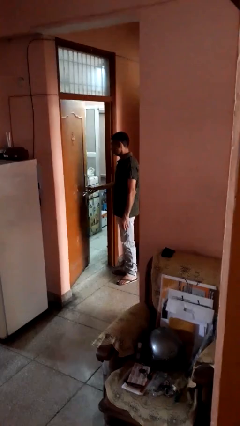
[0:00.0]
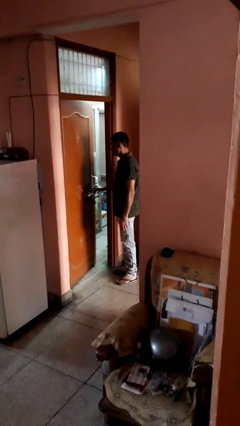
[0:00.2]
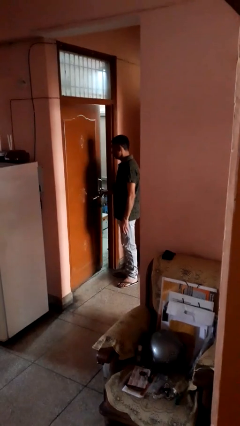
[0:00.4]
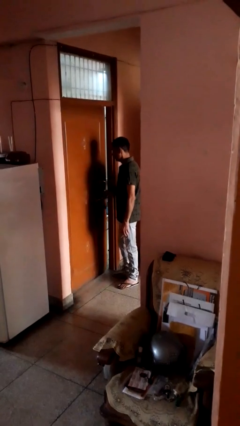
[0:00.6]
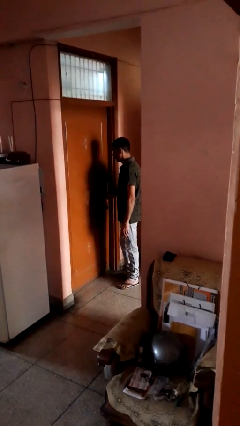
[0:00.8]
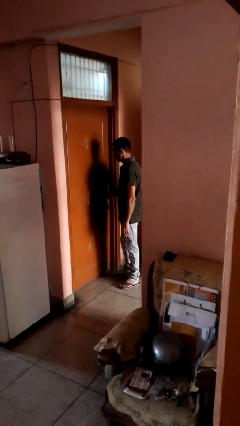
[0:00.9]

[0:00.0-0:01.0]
person closes facility door

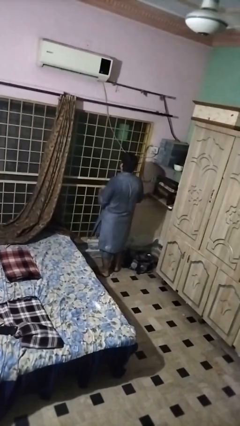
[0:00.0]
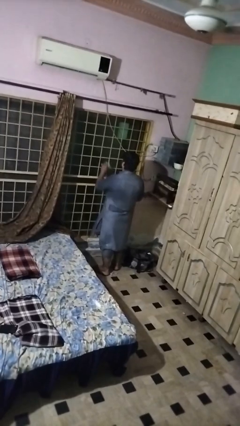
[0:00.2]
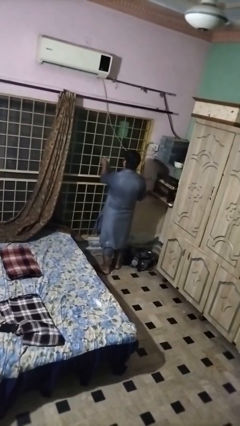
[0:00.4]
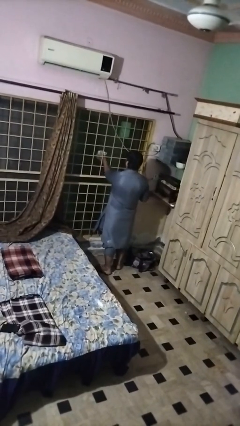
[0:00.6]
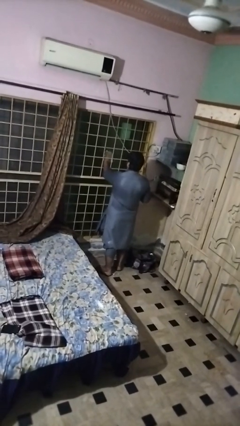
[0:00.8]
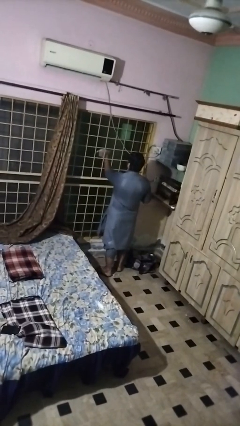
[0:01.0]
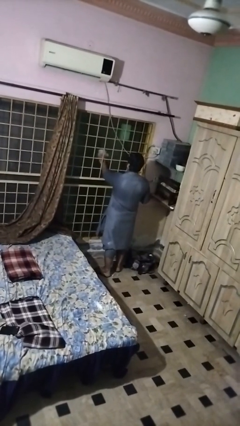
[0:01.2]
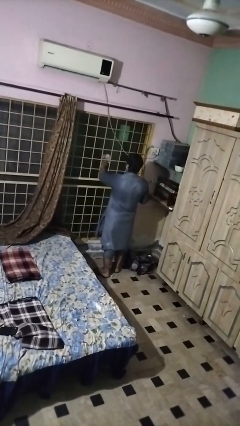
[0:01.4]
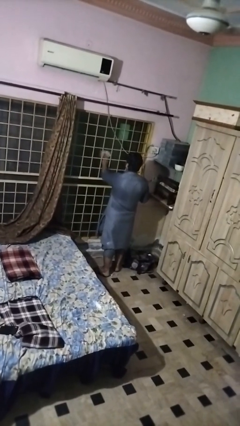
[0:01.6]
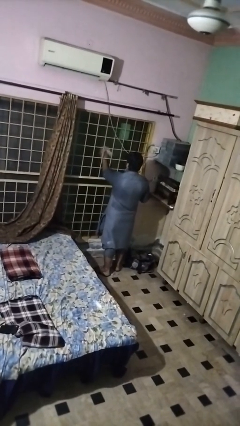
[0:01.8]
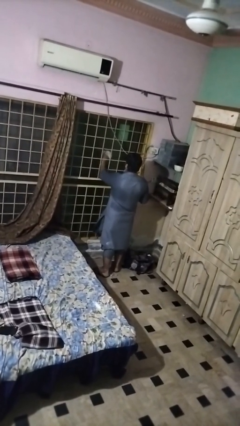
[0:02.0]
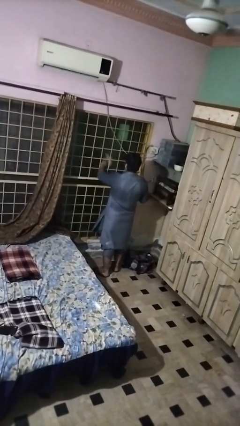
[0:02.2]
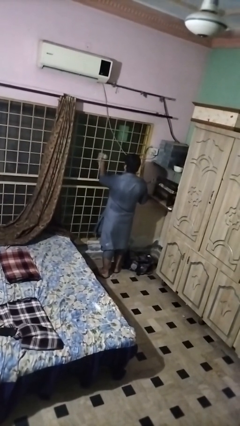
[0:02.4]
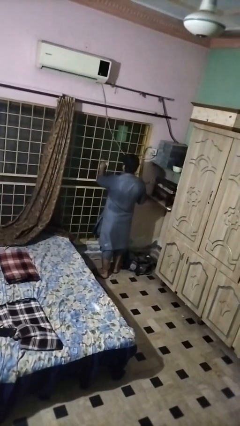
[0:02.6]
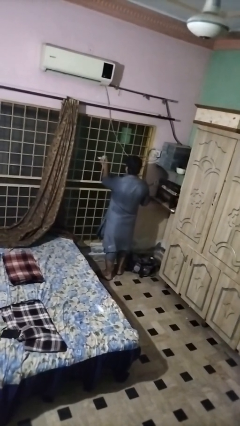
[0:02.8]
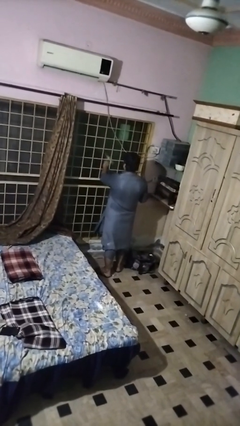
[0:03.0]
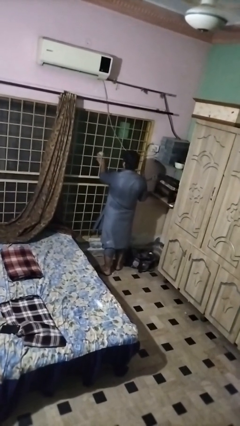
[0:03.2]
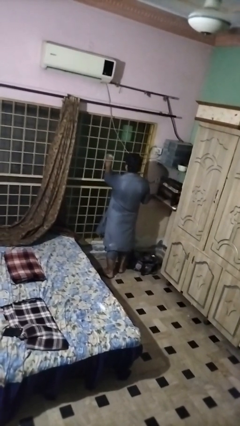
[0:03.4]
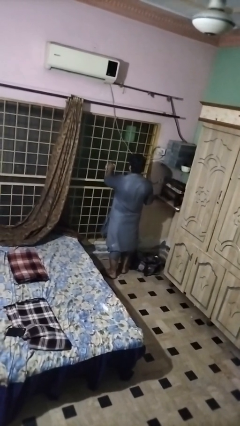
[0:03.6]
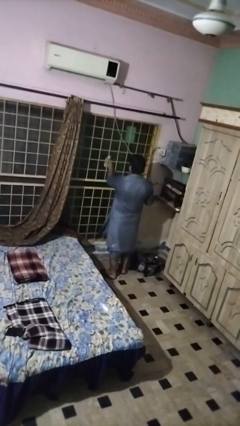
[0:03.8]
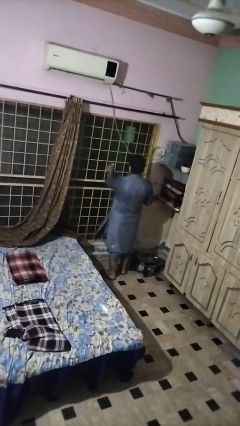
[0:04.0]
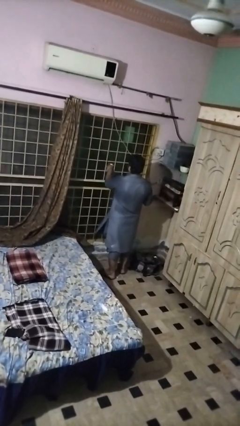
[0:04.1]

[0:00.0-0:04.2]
person washes window

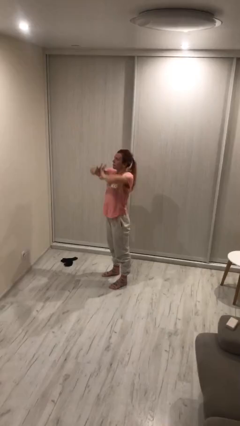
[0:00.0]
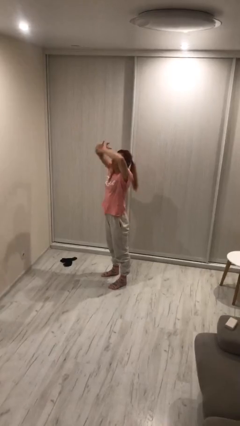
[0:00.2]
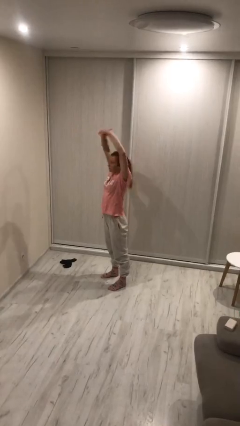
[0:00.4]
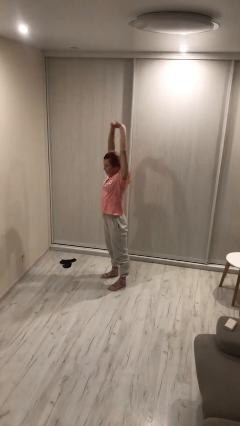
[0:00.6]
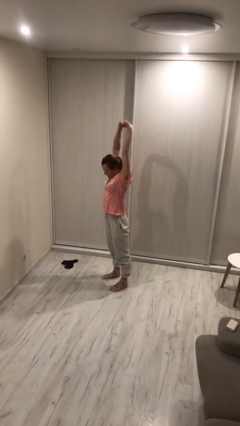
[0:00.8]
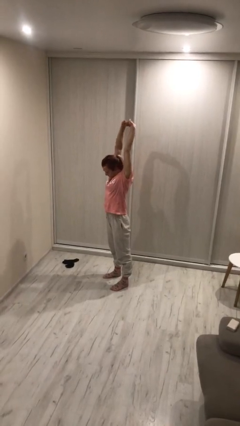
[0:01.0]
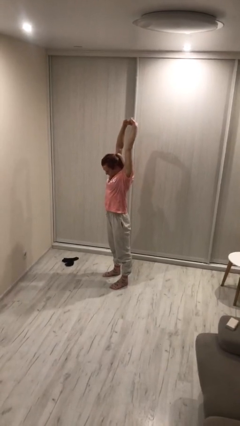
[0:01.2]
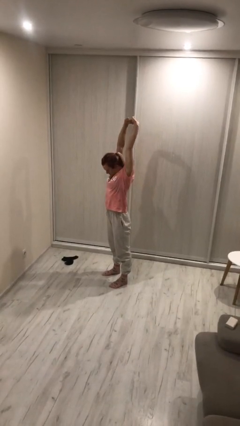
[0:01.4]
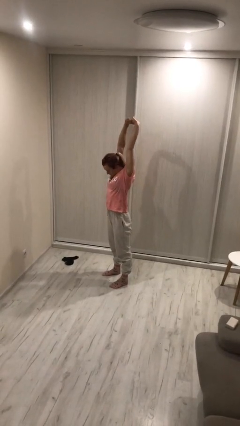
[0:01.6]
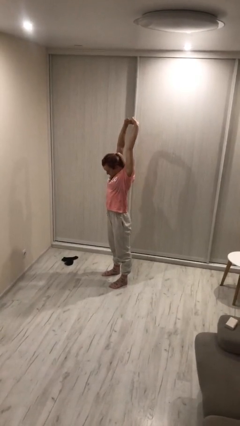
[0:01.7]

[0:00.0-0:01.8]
person stretches arms over head

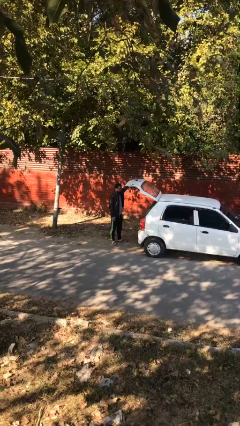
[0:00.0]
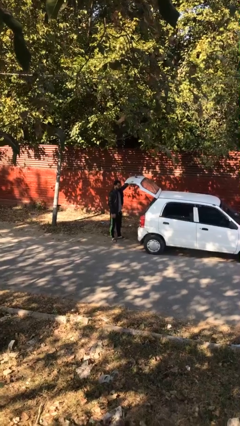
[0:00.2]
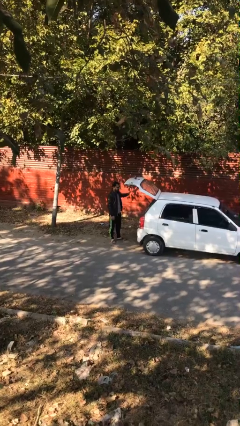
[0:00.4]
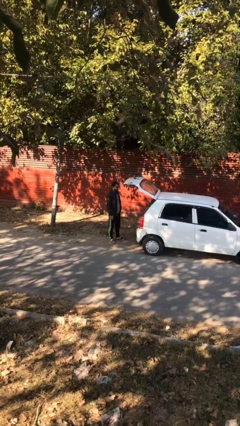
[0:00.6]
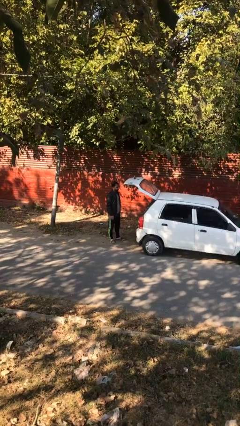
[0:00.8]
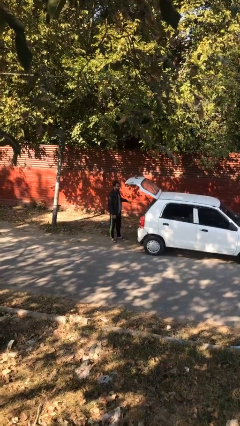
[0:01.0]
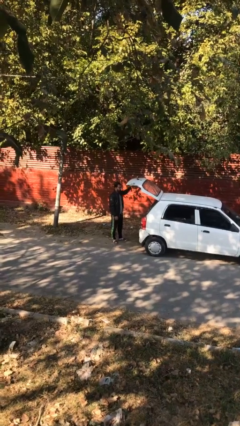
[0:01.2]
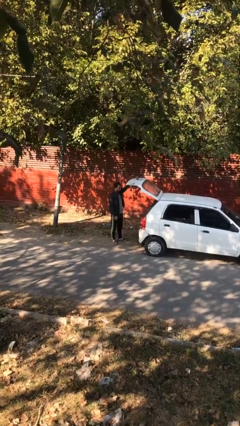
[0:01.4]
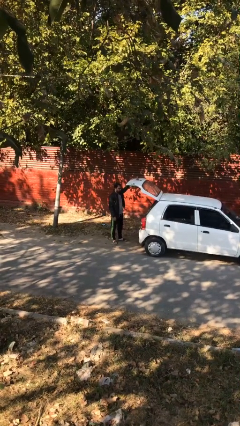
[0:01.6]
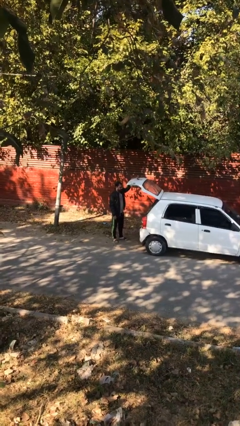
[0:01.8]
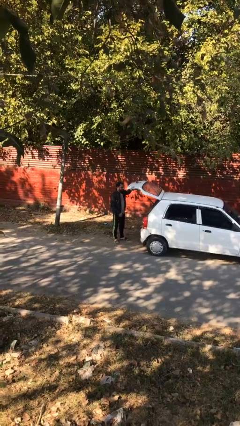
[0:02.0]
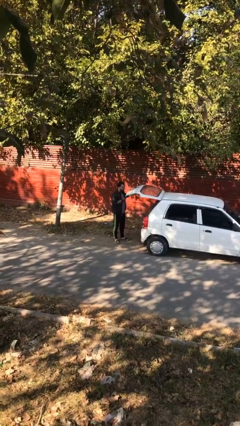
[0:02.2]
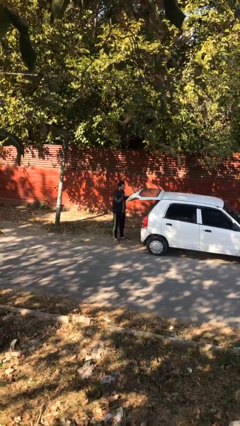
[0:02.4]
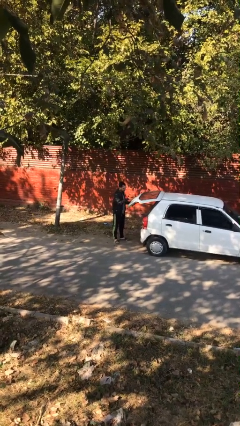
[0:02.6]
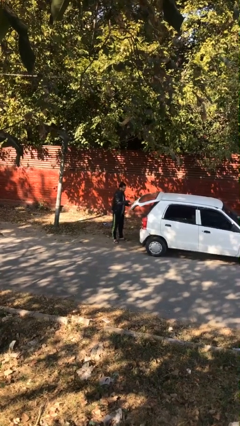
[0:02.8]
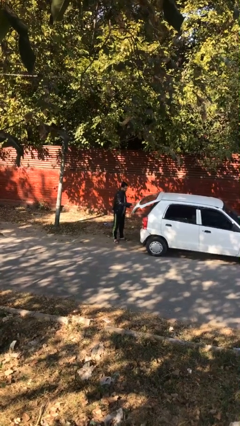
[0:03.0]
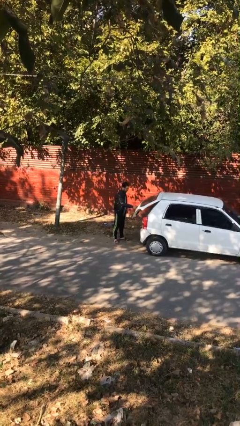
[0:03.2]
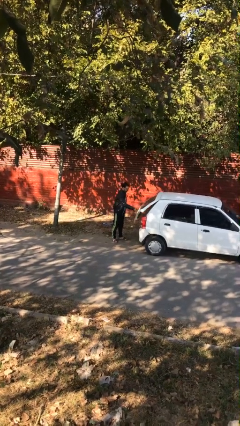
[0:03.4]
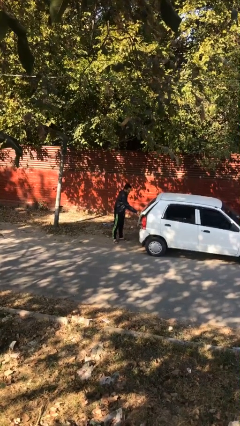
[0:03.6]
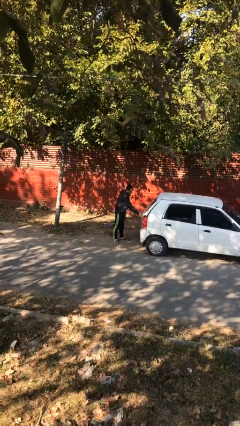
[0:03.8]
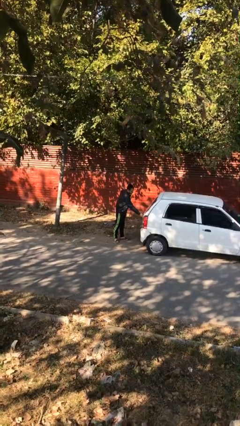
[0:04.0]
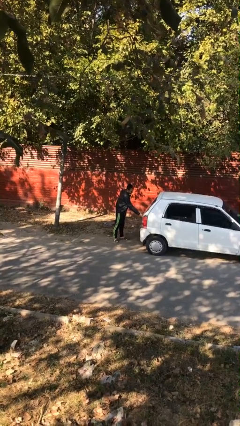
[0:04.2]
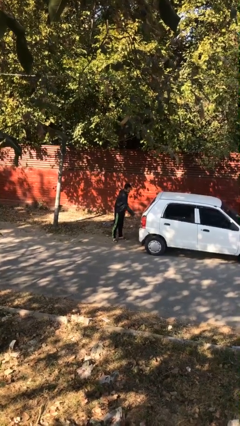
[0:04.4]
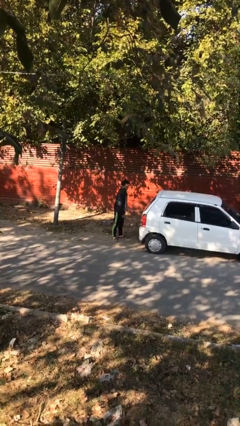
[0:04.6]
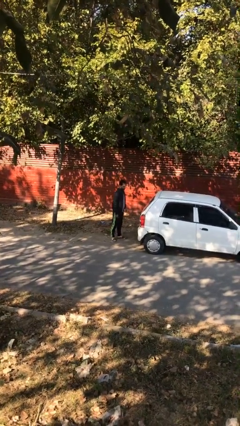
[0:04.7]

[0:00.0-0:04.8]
person closes car trunk

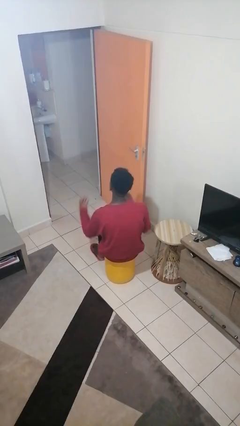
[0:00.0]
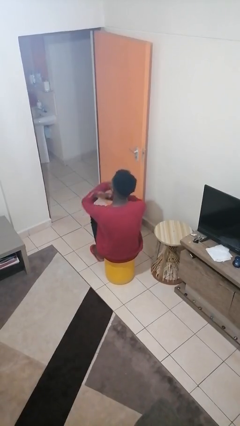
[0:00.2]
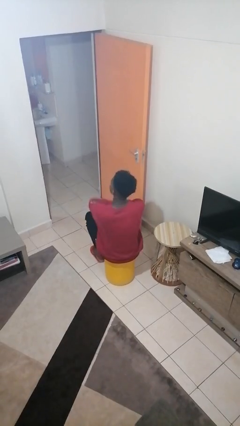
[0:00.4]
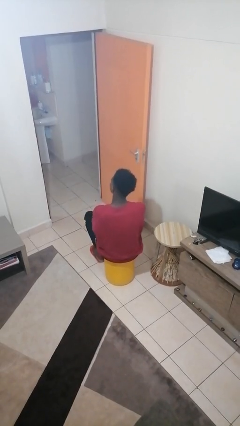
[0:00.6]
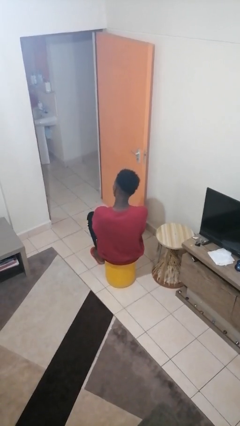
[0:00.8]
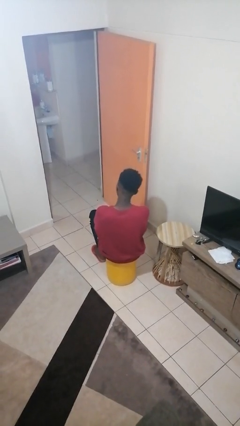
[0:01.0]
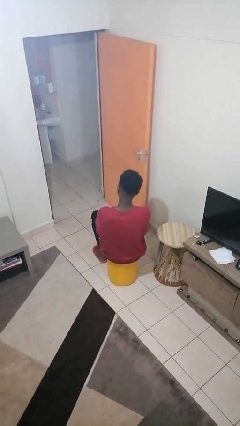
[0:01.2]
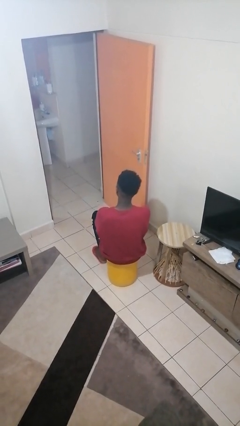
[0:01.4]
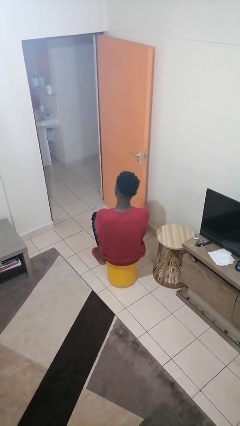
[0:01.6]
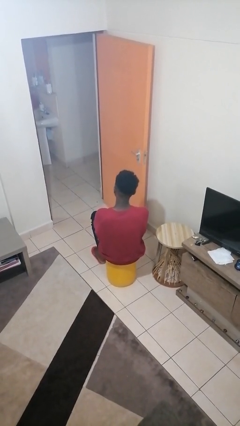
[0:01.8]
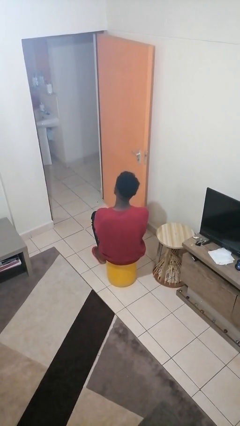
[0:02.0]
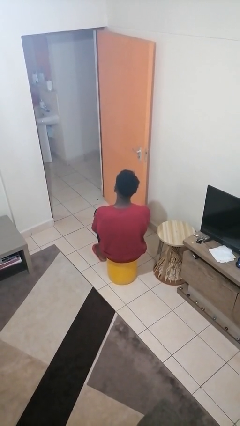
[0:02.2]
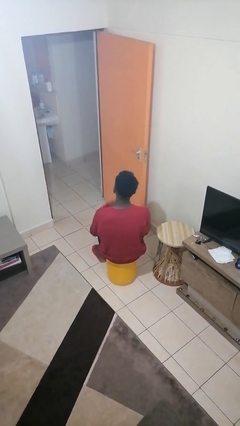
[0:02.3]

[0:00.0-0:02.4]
person crosses arms

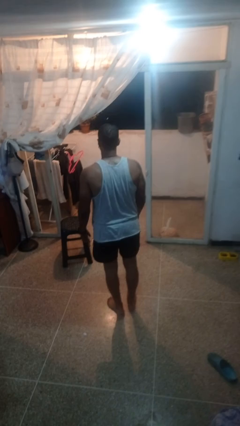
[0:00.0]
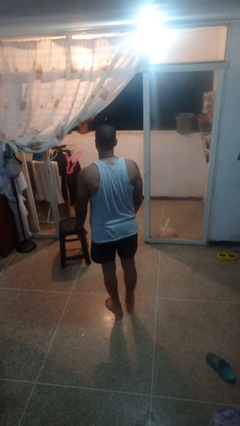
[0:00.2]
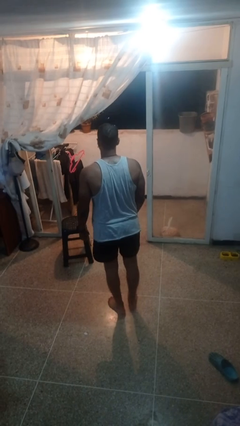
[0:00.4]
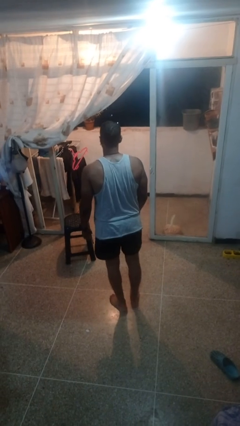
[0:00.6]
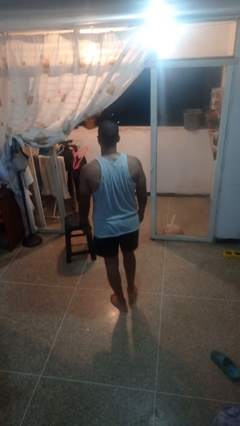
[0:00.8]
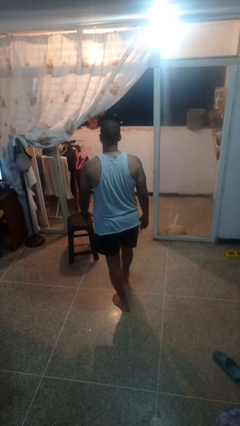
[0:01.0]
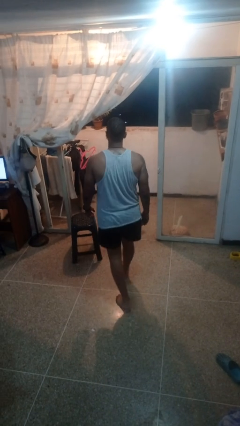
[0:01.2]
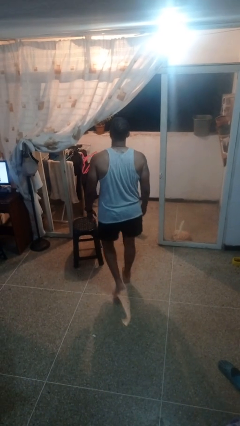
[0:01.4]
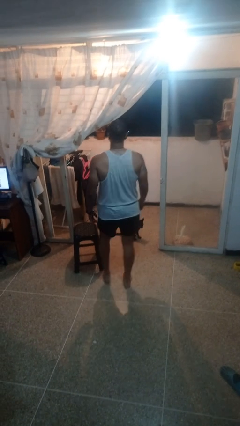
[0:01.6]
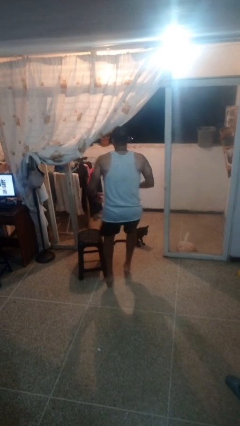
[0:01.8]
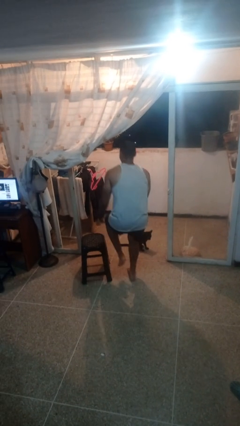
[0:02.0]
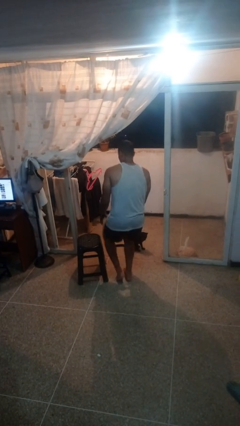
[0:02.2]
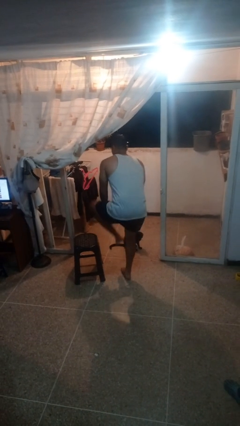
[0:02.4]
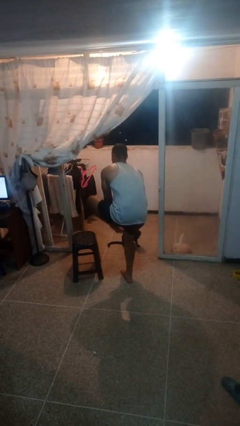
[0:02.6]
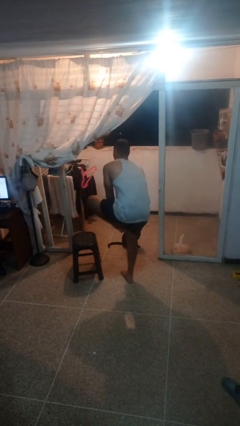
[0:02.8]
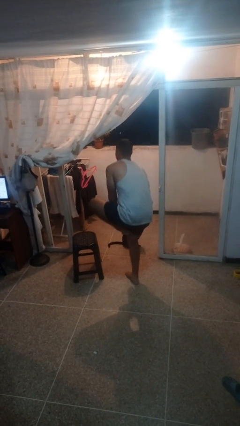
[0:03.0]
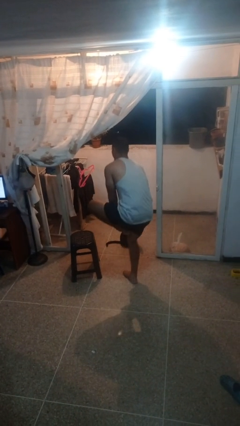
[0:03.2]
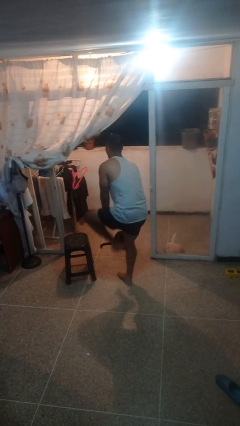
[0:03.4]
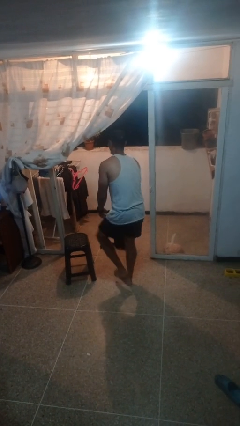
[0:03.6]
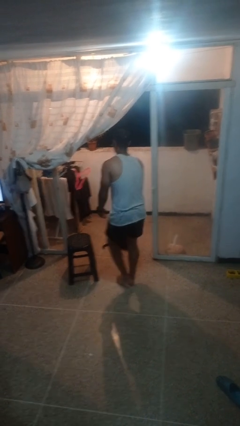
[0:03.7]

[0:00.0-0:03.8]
person stubs toe
